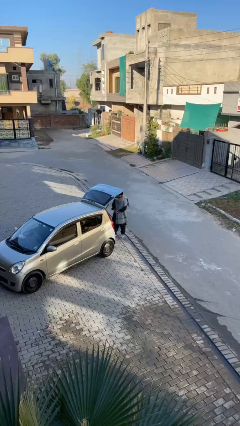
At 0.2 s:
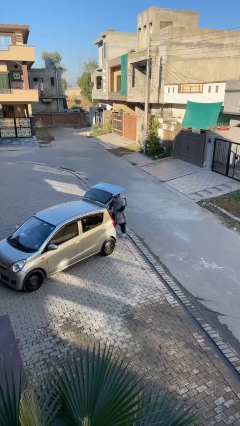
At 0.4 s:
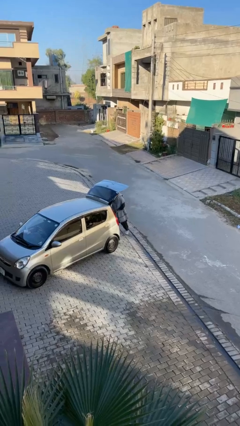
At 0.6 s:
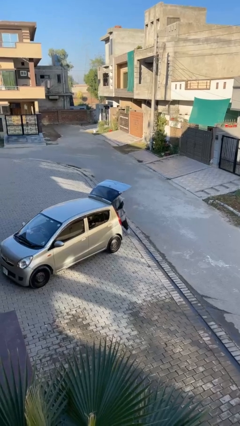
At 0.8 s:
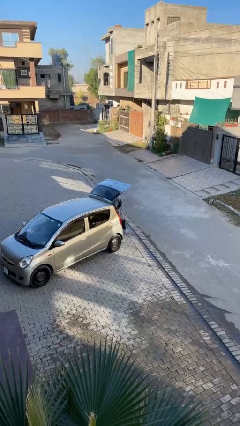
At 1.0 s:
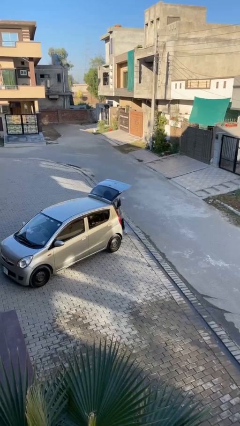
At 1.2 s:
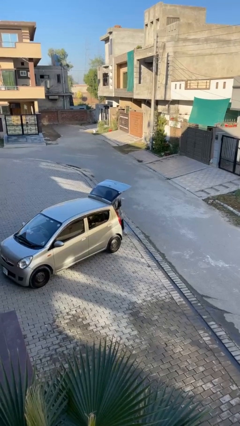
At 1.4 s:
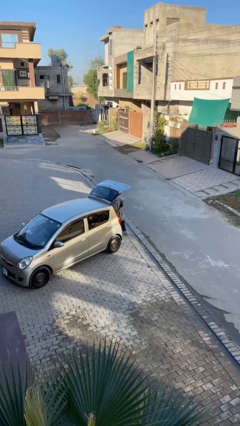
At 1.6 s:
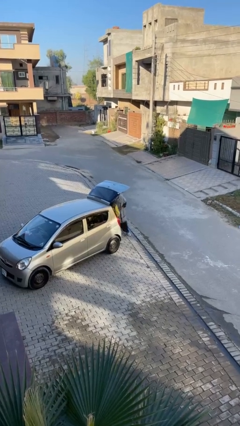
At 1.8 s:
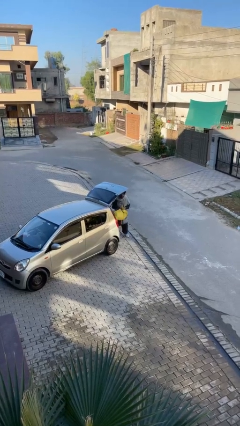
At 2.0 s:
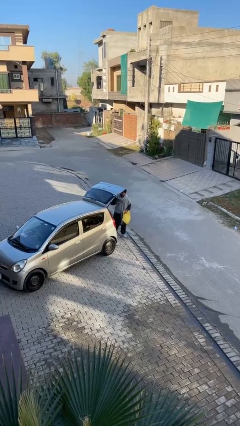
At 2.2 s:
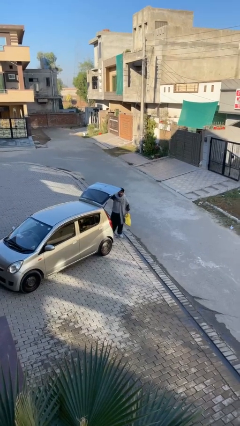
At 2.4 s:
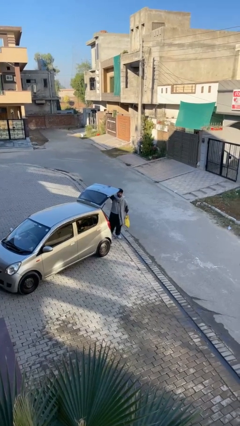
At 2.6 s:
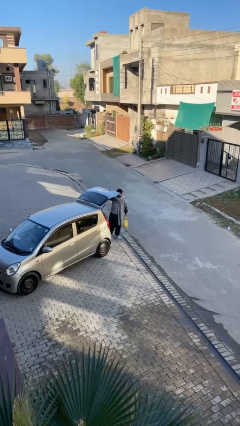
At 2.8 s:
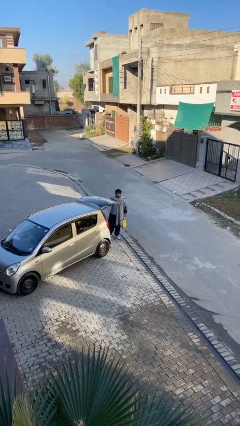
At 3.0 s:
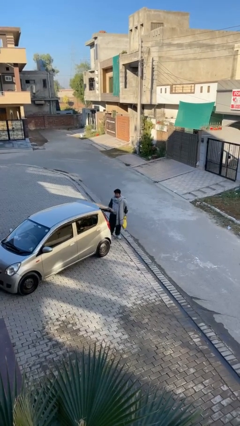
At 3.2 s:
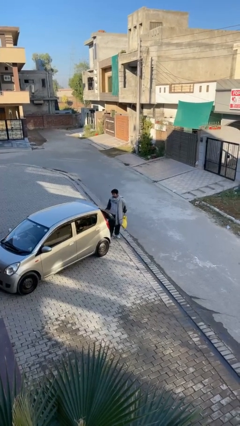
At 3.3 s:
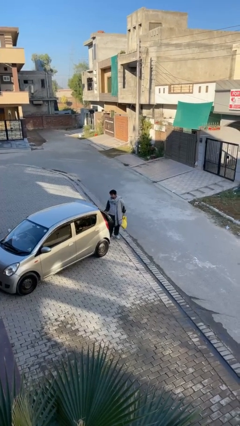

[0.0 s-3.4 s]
person unloads car

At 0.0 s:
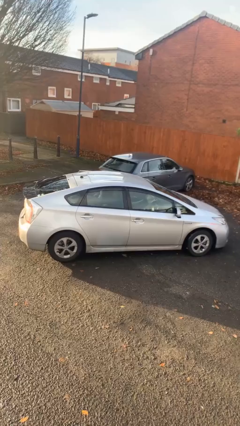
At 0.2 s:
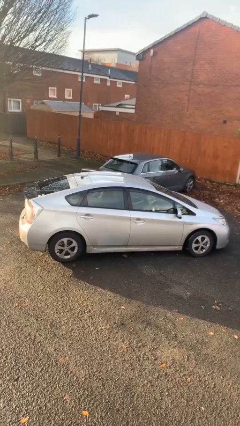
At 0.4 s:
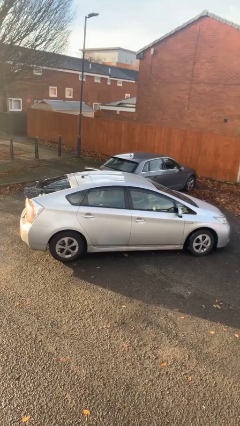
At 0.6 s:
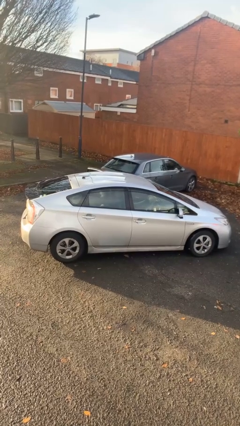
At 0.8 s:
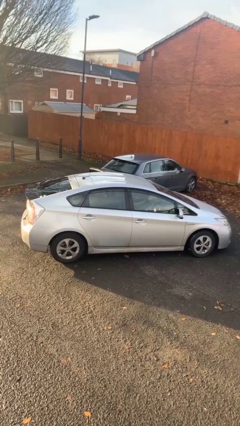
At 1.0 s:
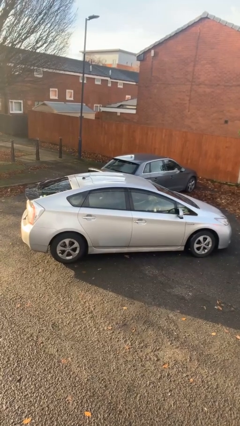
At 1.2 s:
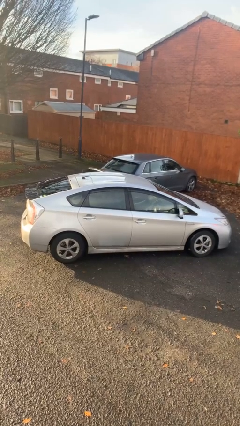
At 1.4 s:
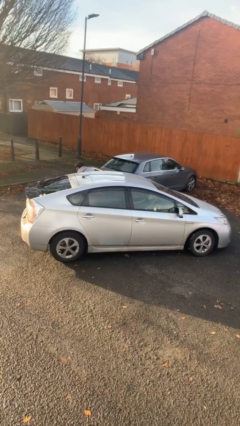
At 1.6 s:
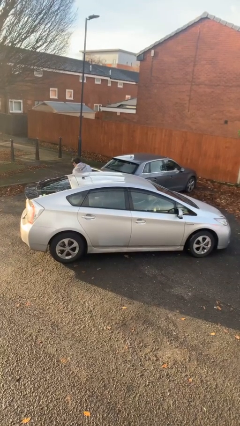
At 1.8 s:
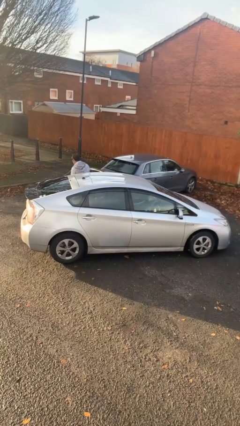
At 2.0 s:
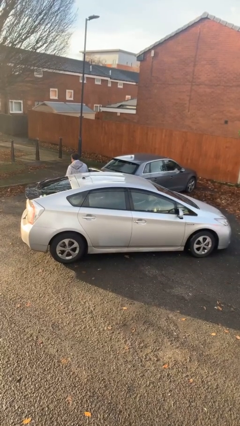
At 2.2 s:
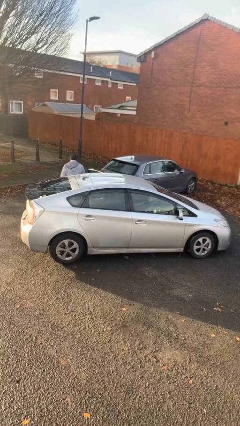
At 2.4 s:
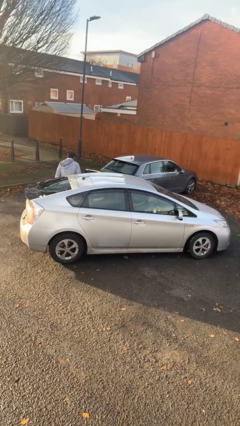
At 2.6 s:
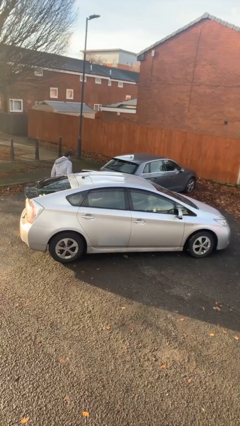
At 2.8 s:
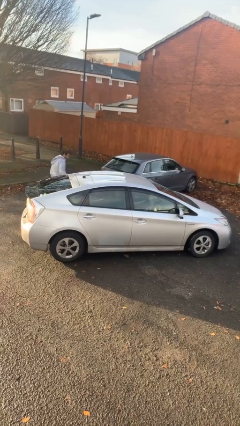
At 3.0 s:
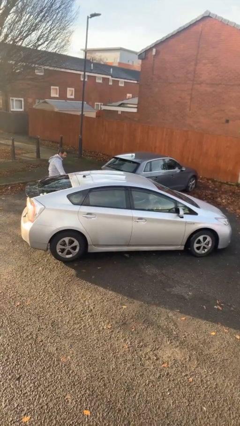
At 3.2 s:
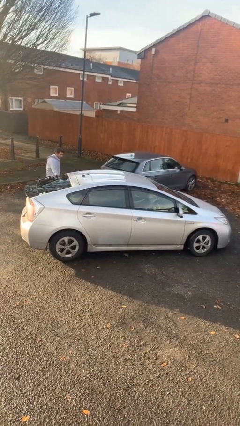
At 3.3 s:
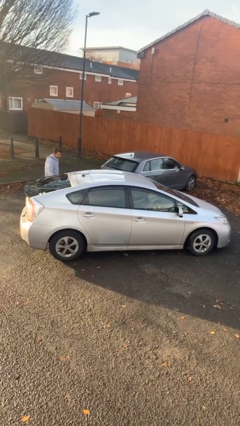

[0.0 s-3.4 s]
car drops off person

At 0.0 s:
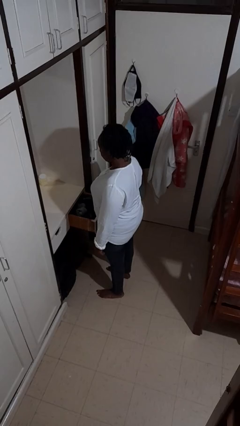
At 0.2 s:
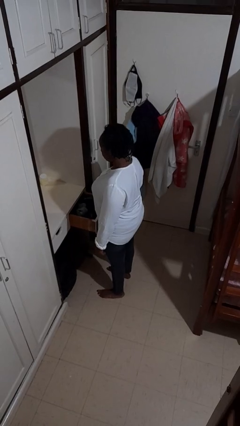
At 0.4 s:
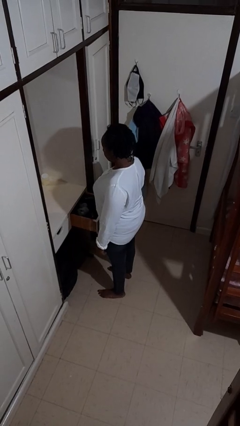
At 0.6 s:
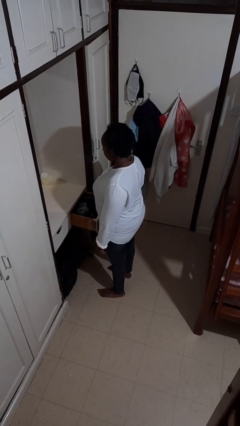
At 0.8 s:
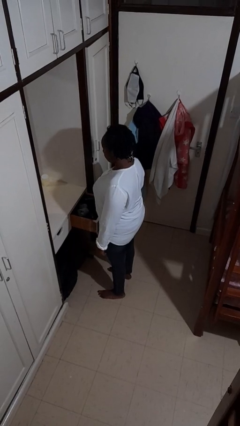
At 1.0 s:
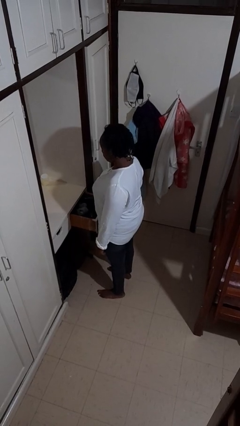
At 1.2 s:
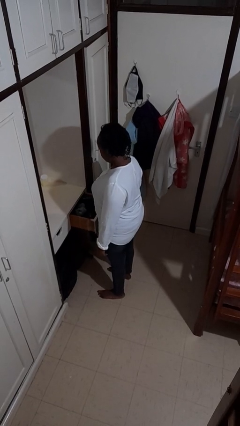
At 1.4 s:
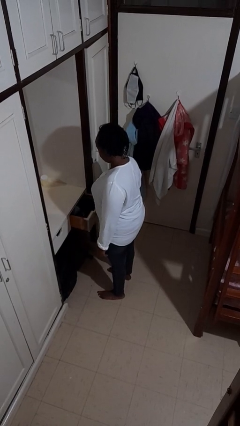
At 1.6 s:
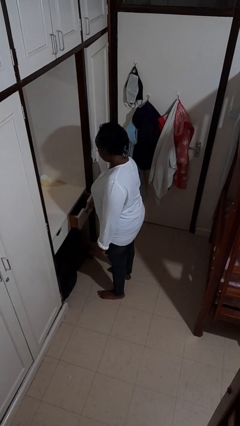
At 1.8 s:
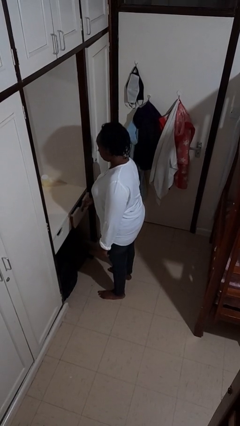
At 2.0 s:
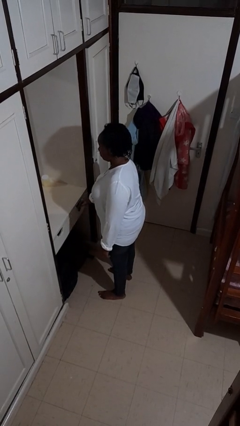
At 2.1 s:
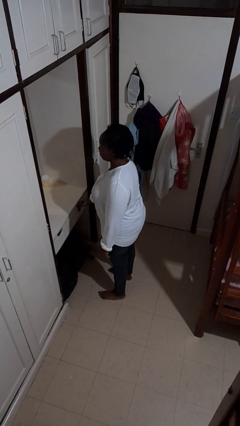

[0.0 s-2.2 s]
person closes dresser drawer

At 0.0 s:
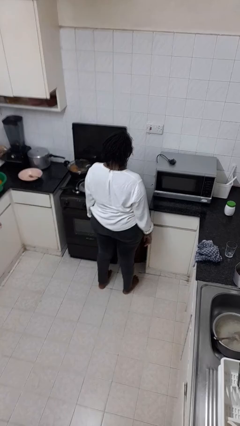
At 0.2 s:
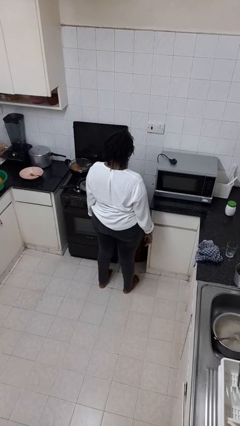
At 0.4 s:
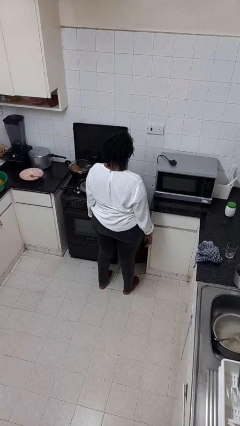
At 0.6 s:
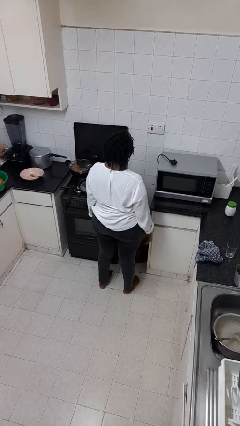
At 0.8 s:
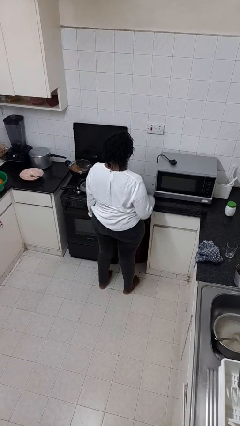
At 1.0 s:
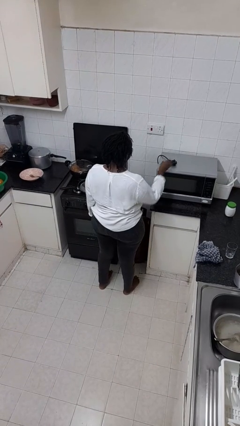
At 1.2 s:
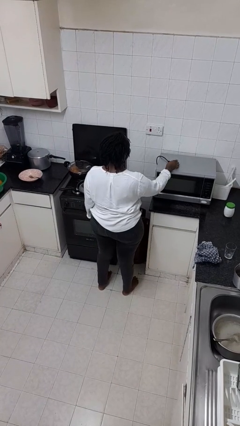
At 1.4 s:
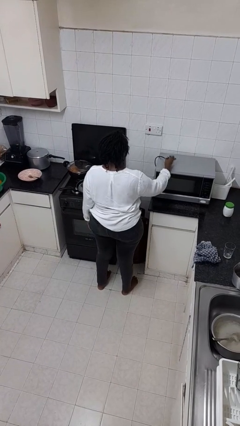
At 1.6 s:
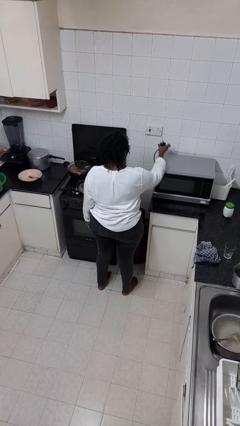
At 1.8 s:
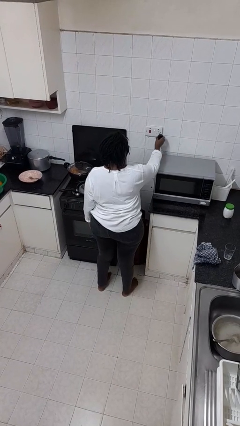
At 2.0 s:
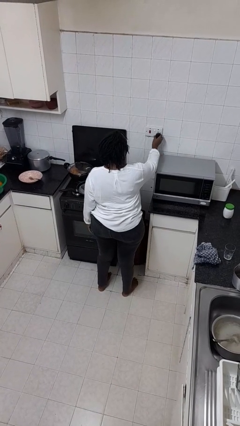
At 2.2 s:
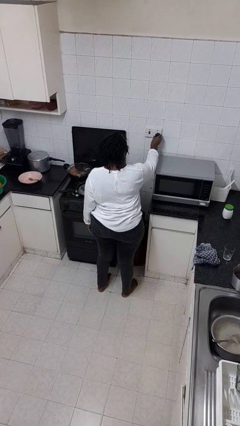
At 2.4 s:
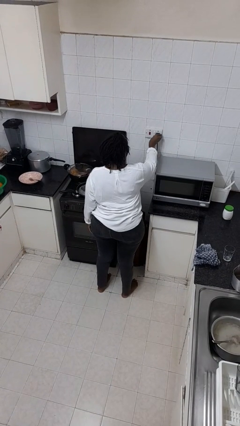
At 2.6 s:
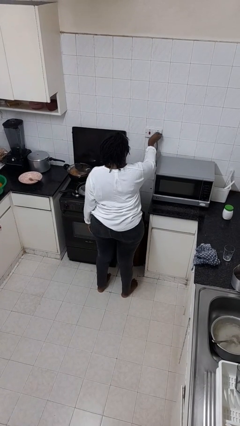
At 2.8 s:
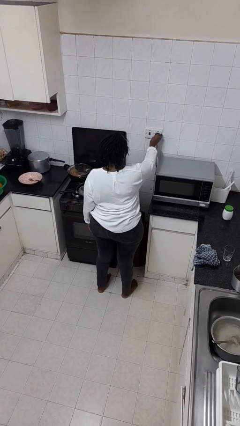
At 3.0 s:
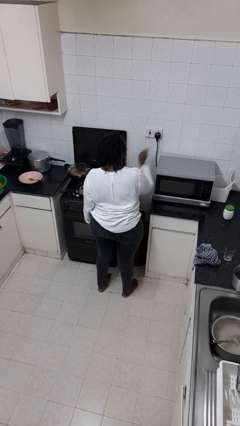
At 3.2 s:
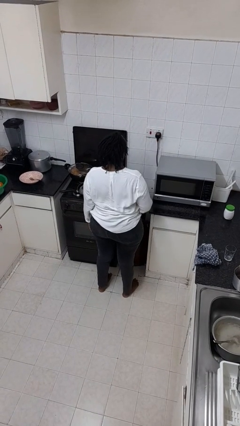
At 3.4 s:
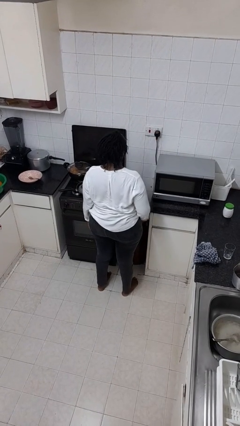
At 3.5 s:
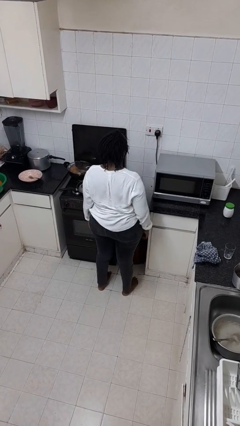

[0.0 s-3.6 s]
person plugs into electrical socket

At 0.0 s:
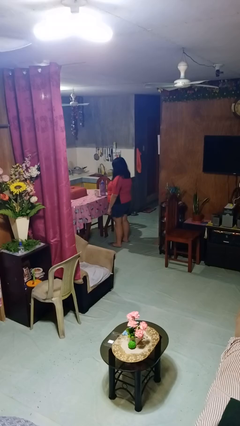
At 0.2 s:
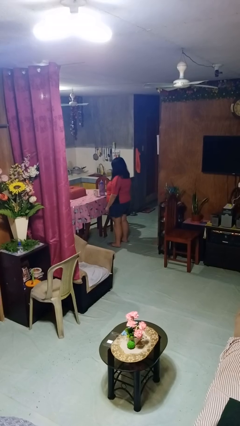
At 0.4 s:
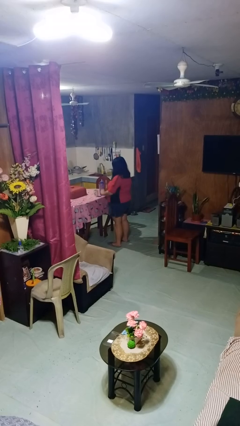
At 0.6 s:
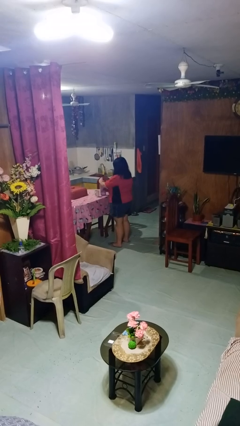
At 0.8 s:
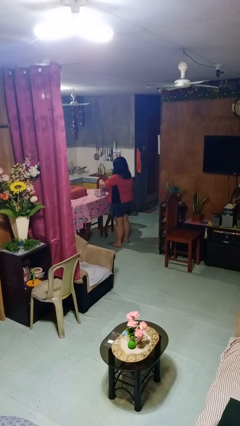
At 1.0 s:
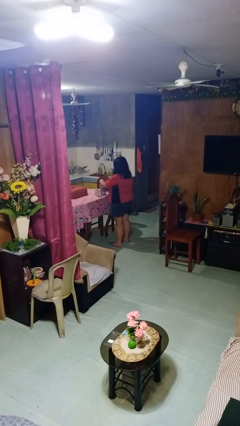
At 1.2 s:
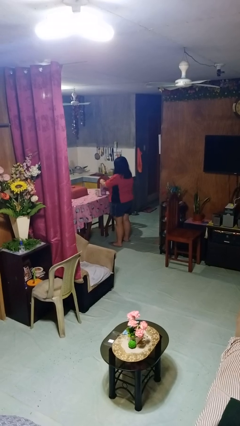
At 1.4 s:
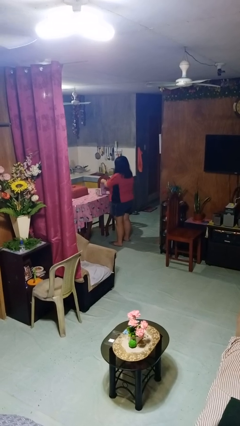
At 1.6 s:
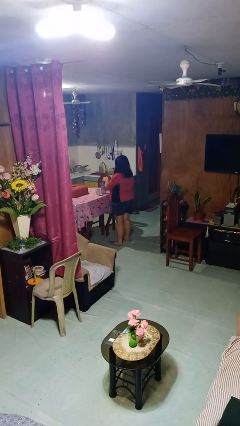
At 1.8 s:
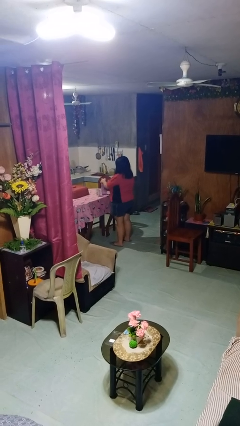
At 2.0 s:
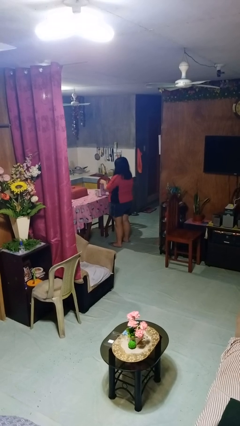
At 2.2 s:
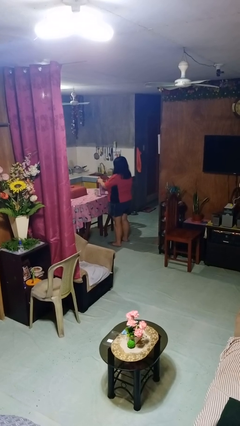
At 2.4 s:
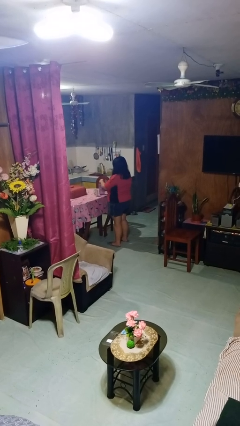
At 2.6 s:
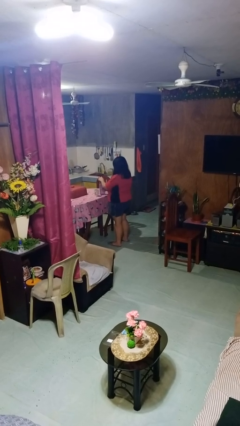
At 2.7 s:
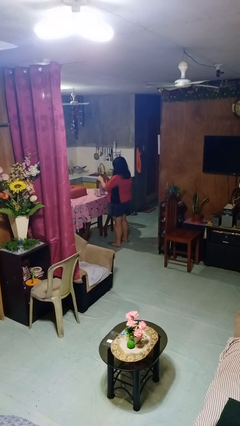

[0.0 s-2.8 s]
person unscrews lid from bottle

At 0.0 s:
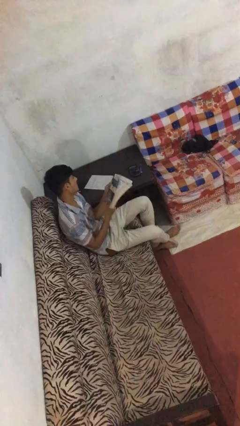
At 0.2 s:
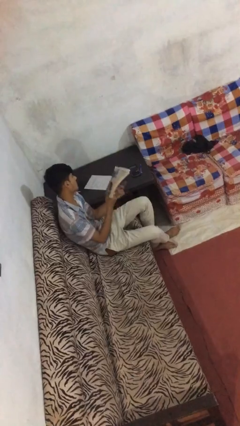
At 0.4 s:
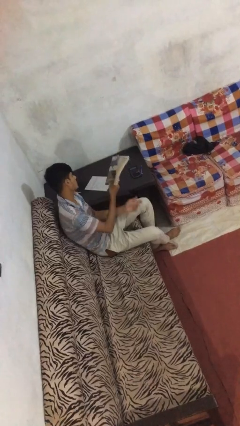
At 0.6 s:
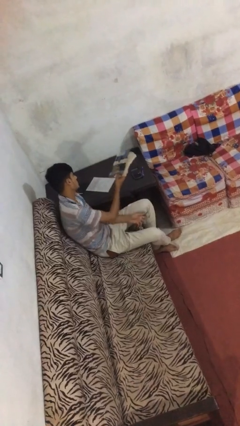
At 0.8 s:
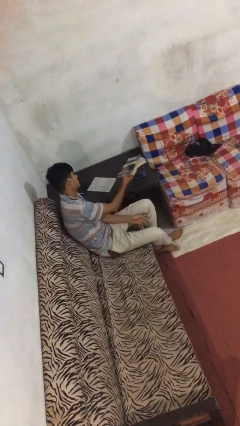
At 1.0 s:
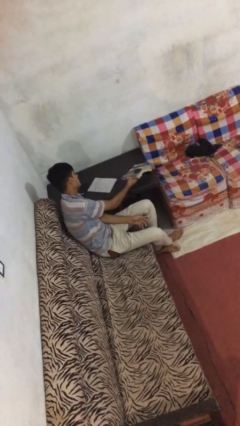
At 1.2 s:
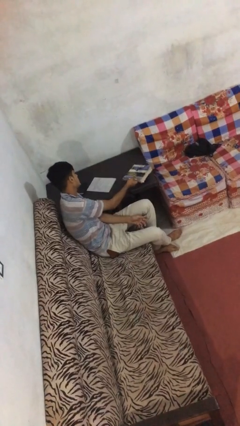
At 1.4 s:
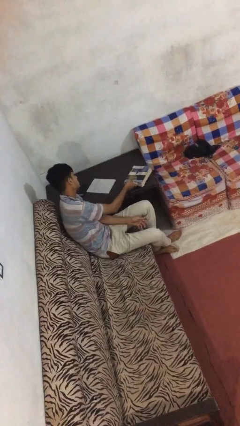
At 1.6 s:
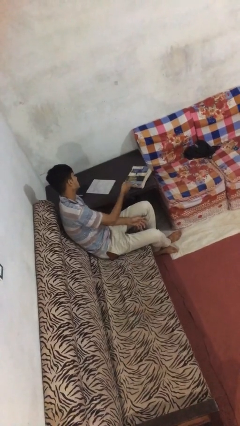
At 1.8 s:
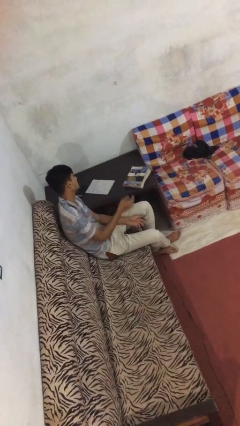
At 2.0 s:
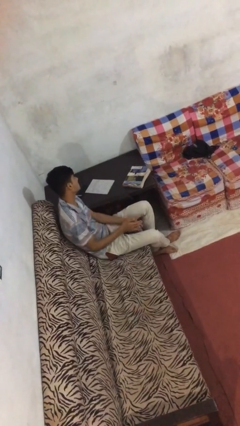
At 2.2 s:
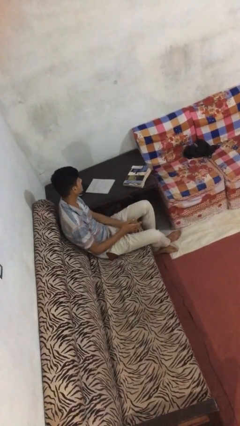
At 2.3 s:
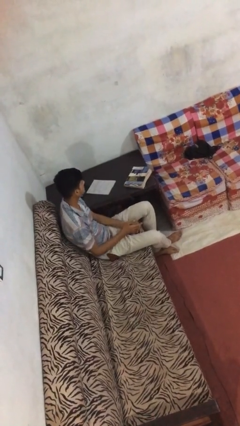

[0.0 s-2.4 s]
person puts down object on table
